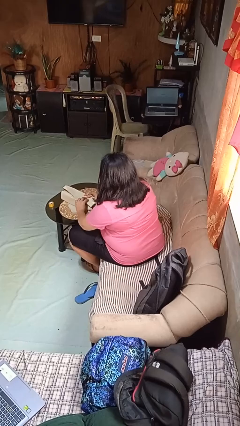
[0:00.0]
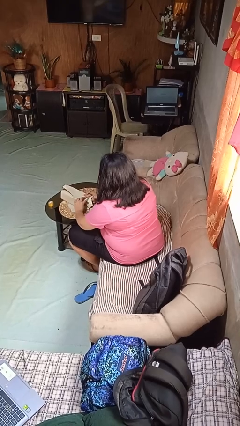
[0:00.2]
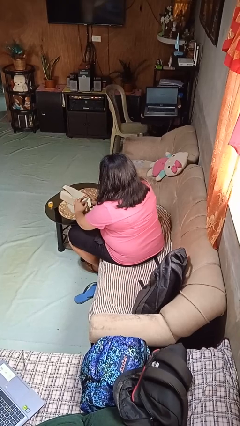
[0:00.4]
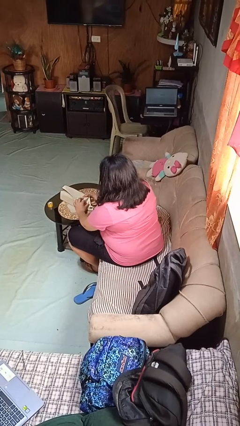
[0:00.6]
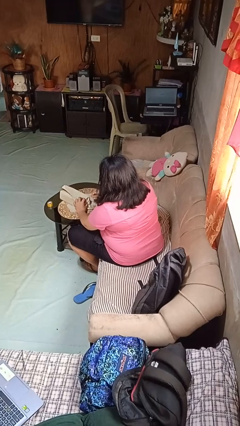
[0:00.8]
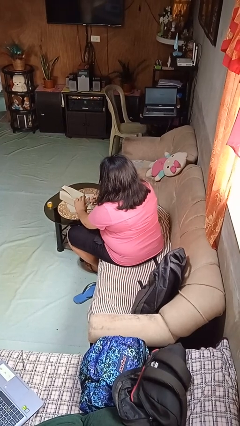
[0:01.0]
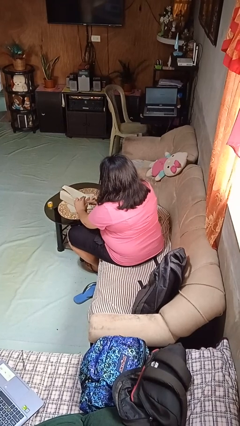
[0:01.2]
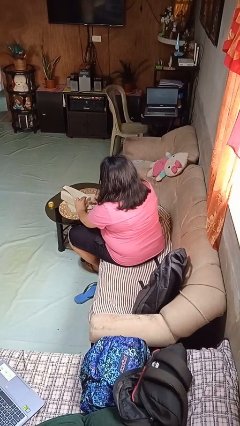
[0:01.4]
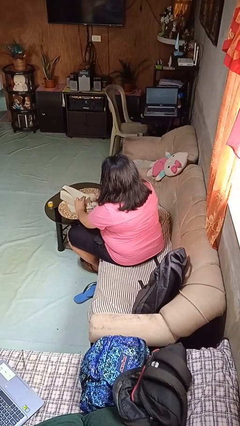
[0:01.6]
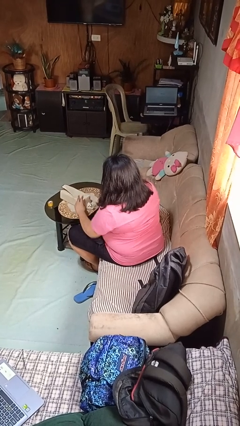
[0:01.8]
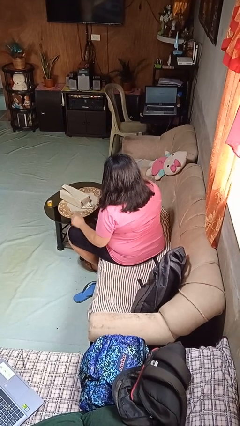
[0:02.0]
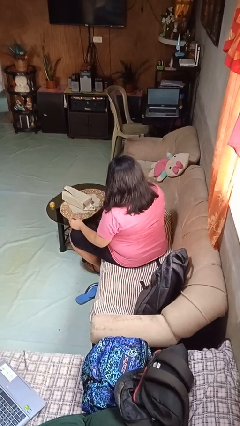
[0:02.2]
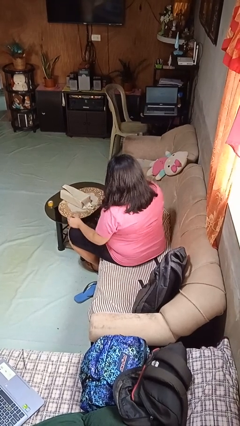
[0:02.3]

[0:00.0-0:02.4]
person wraps box

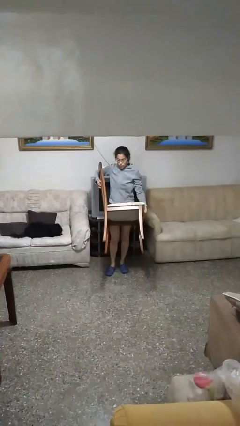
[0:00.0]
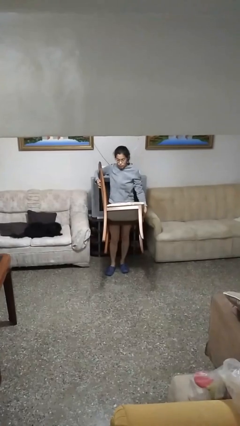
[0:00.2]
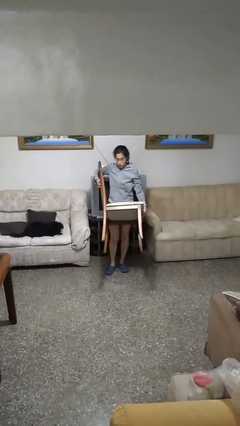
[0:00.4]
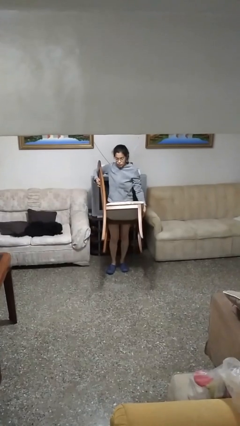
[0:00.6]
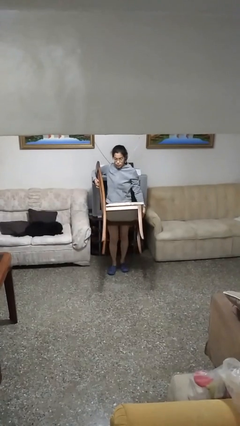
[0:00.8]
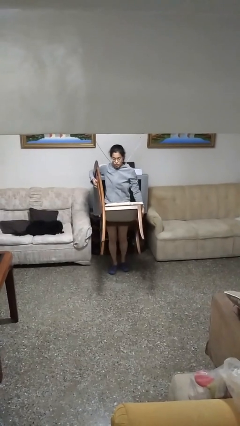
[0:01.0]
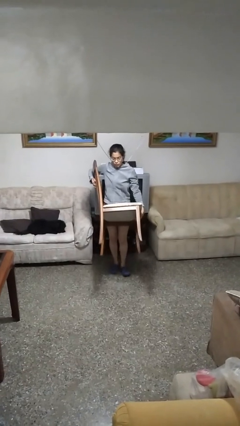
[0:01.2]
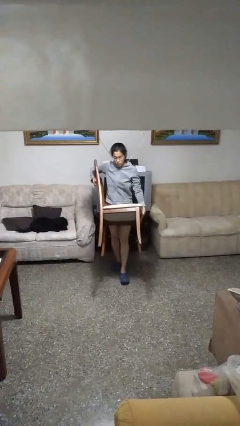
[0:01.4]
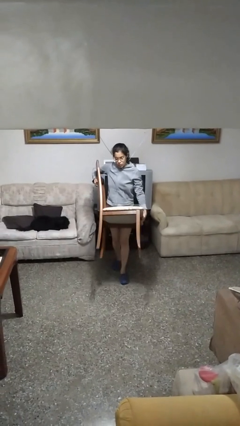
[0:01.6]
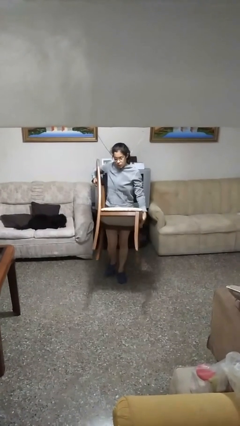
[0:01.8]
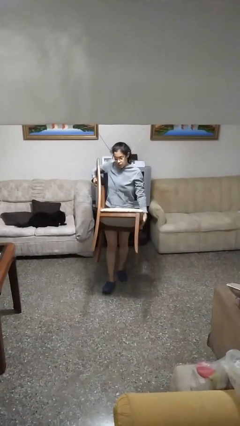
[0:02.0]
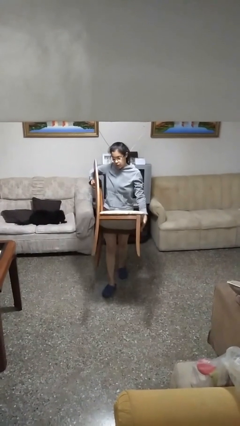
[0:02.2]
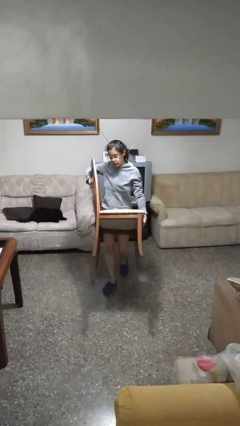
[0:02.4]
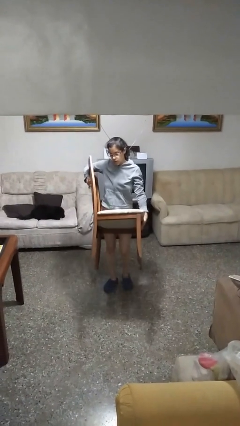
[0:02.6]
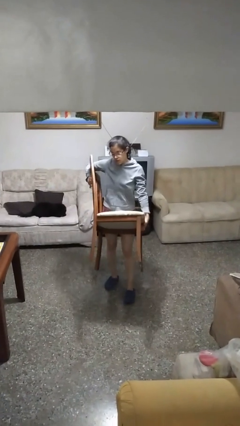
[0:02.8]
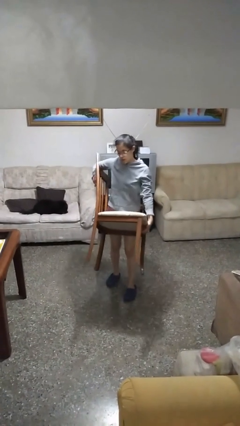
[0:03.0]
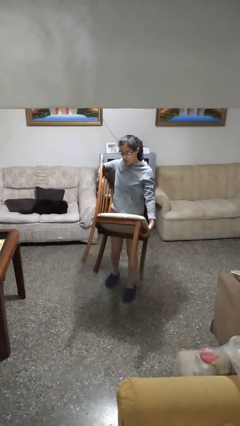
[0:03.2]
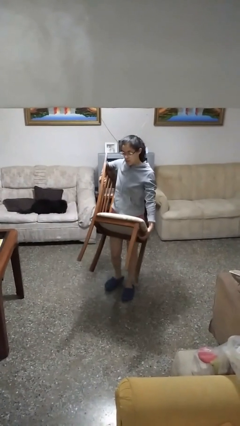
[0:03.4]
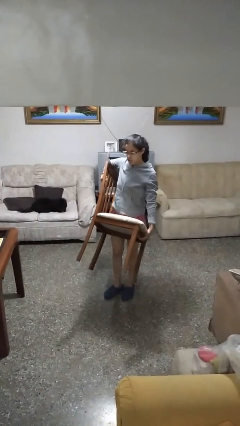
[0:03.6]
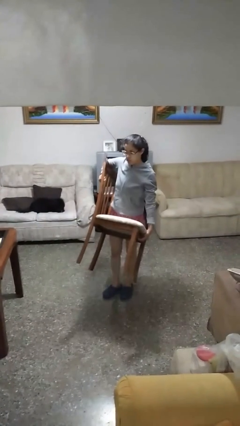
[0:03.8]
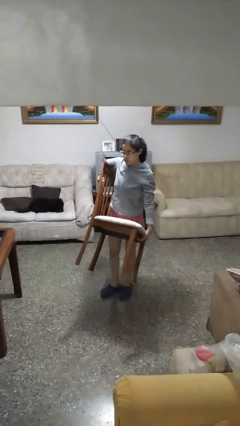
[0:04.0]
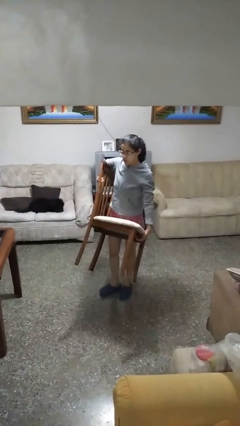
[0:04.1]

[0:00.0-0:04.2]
person carries furniture

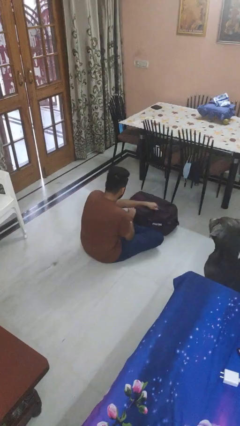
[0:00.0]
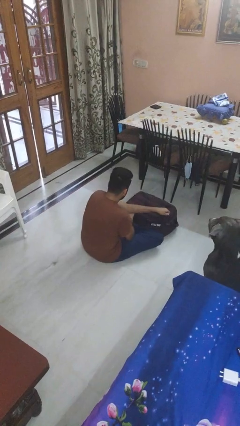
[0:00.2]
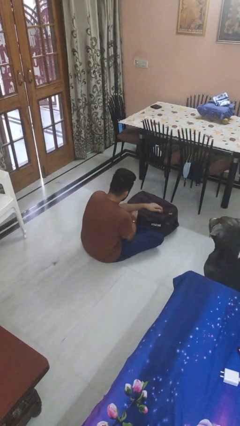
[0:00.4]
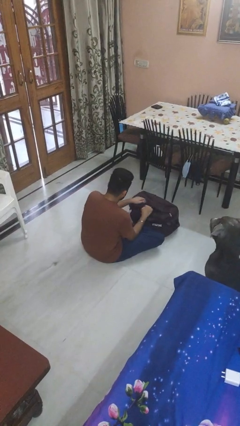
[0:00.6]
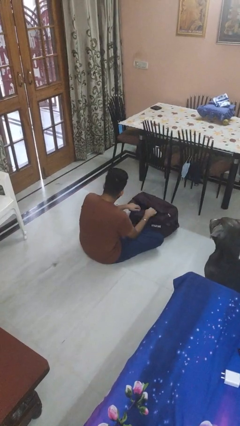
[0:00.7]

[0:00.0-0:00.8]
person opens suitcase

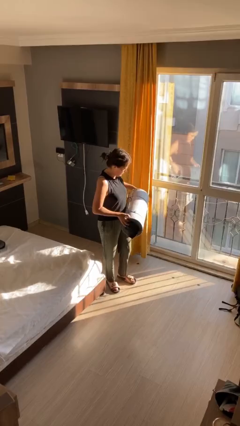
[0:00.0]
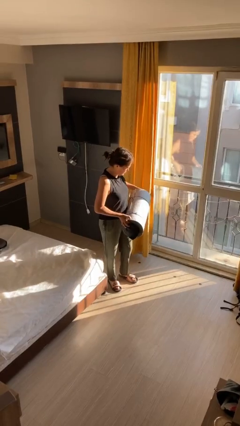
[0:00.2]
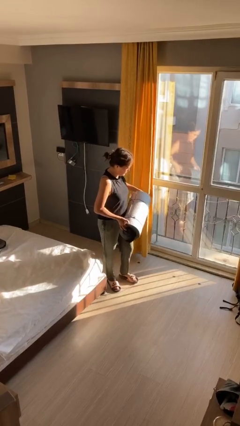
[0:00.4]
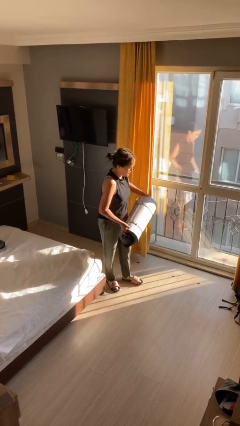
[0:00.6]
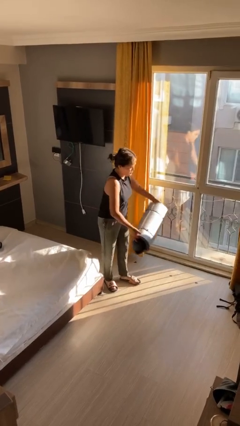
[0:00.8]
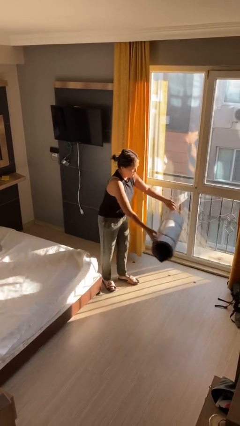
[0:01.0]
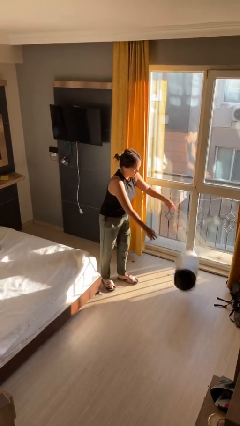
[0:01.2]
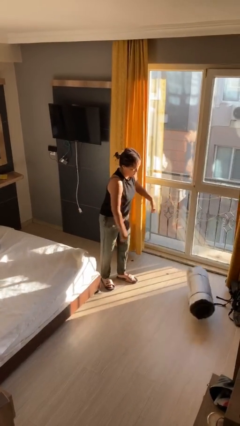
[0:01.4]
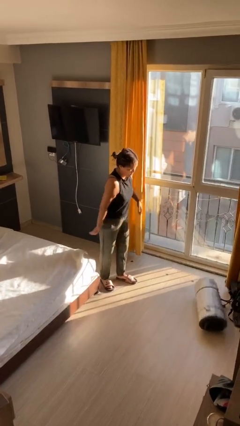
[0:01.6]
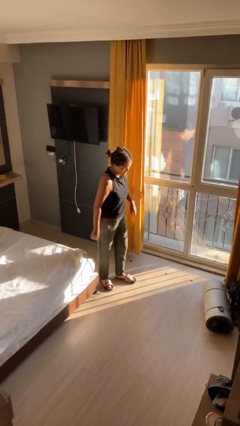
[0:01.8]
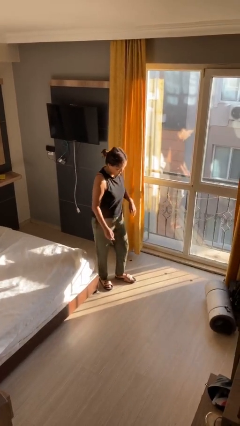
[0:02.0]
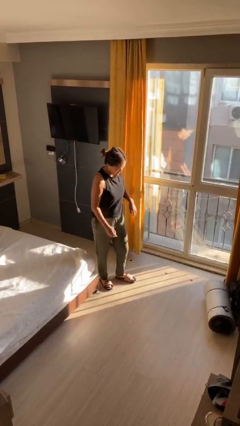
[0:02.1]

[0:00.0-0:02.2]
person throws object to ground

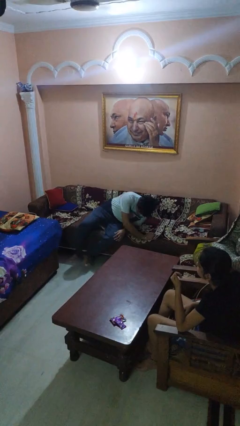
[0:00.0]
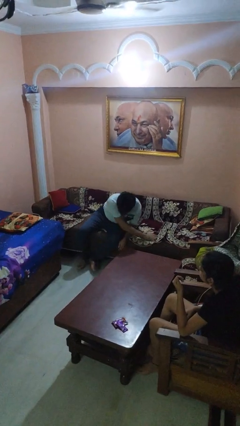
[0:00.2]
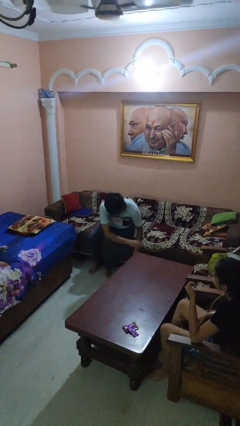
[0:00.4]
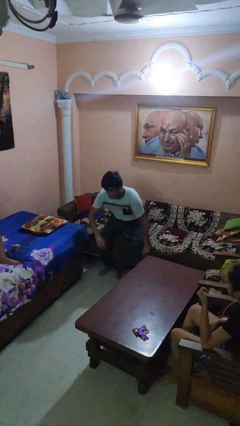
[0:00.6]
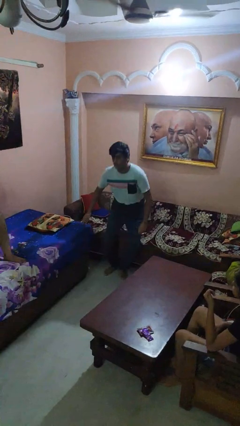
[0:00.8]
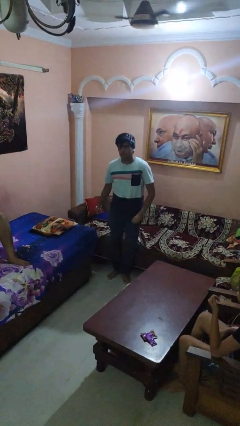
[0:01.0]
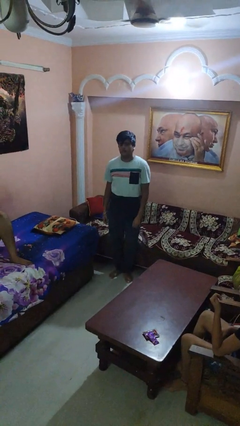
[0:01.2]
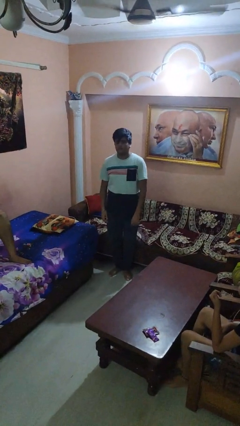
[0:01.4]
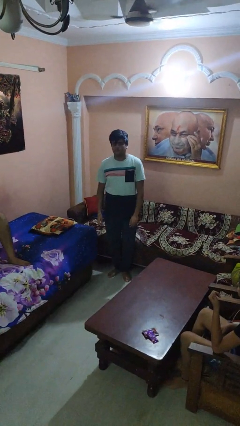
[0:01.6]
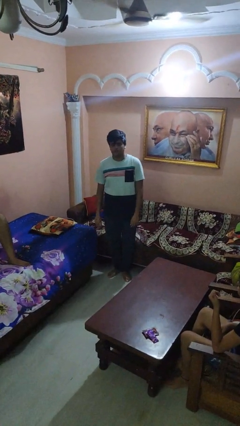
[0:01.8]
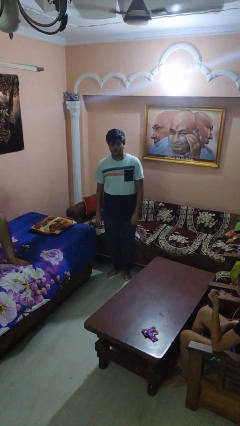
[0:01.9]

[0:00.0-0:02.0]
person stands up

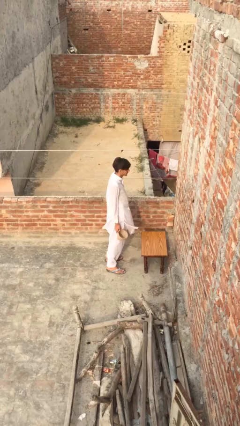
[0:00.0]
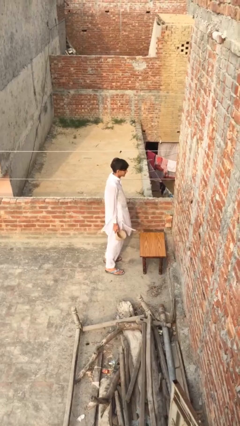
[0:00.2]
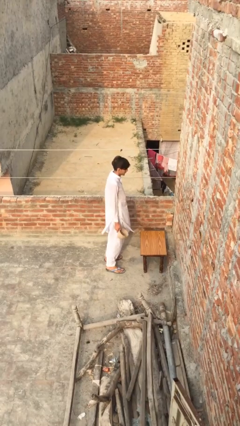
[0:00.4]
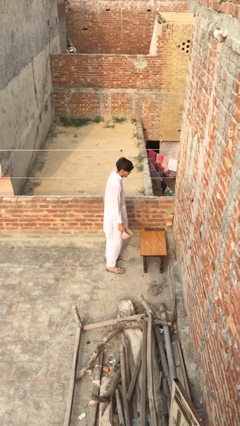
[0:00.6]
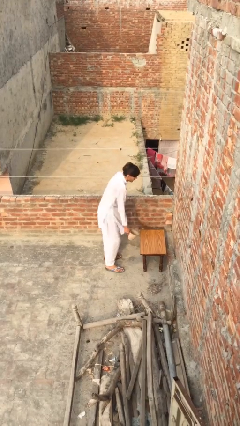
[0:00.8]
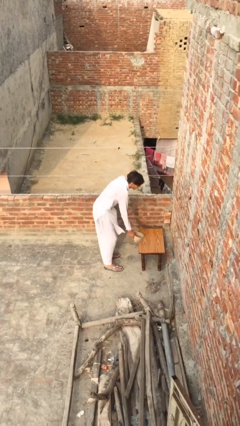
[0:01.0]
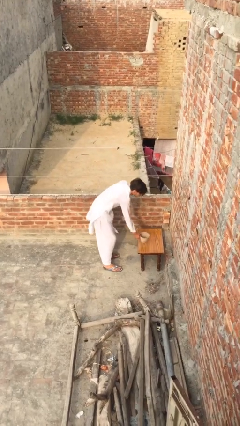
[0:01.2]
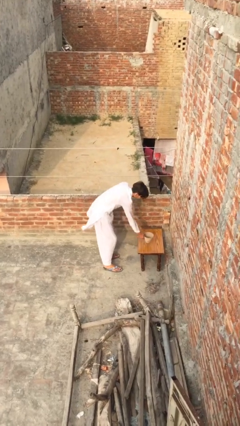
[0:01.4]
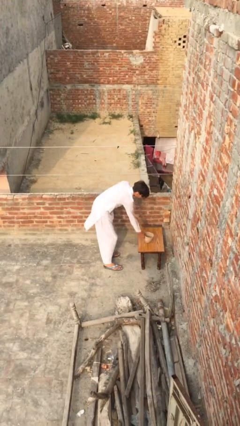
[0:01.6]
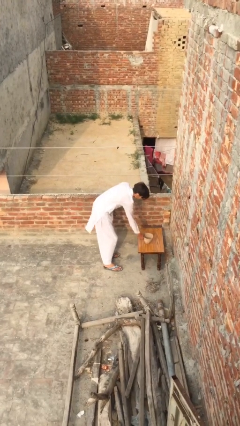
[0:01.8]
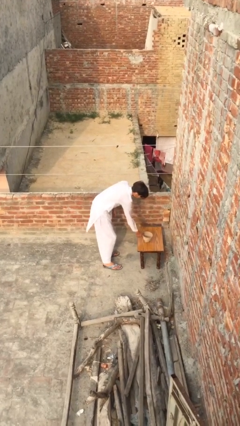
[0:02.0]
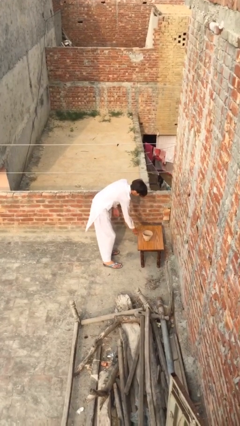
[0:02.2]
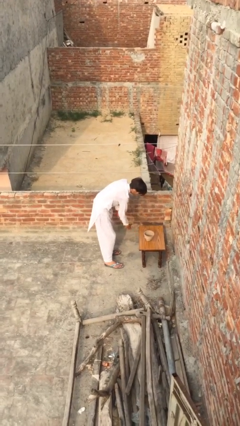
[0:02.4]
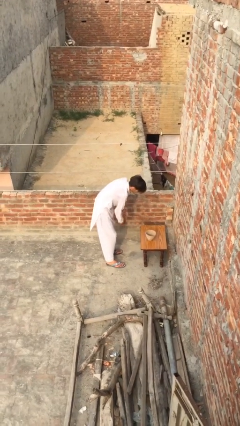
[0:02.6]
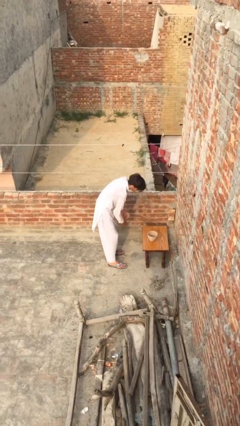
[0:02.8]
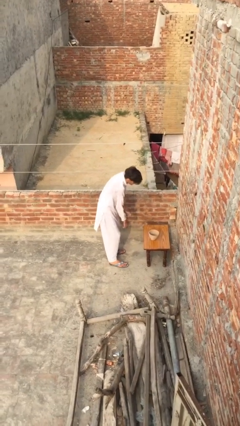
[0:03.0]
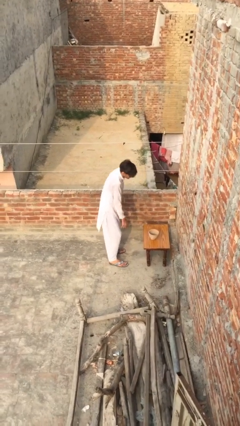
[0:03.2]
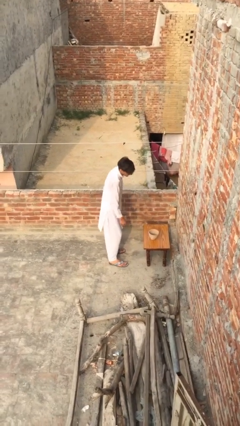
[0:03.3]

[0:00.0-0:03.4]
person puts down object on table

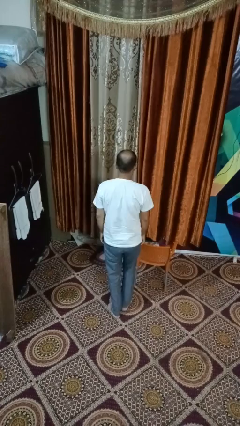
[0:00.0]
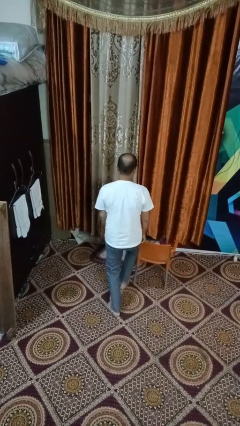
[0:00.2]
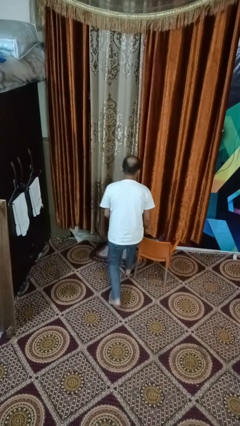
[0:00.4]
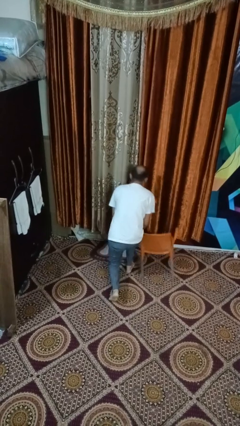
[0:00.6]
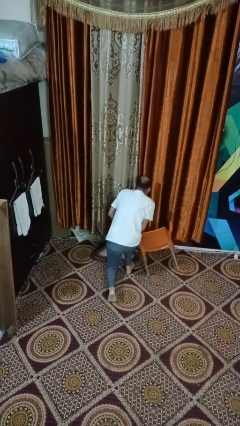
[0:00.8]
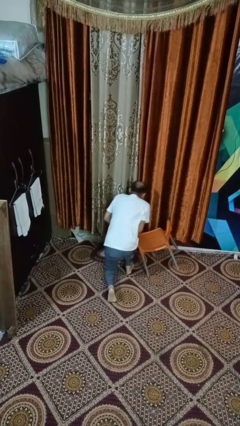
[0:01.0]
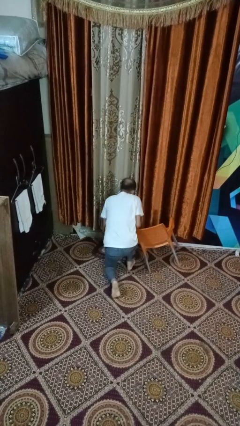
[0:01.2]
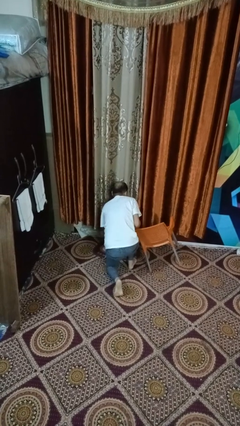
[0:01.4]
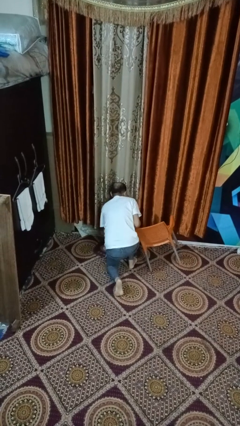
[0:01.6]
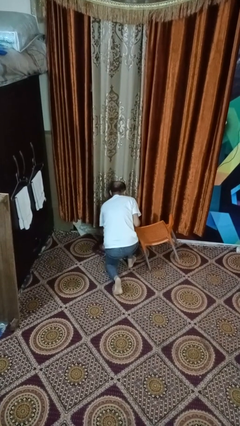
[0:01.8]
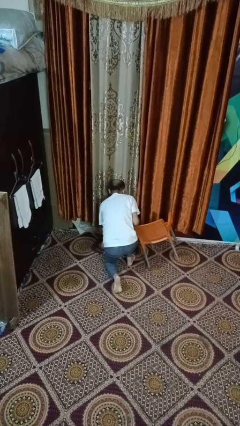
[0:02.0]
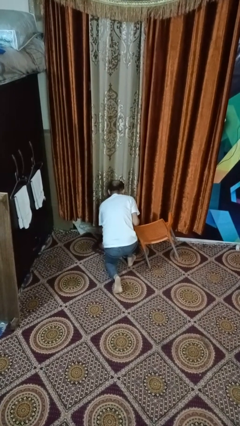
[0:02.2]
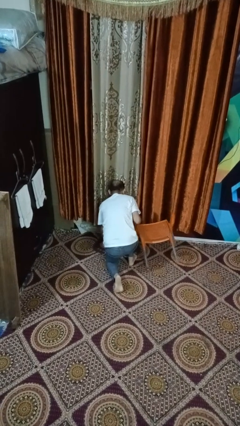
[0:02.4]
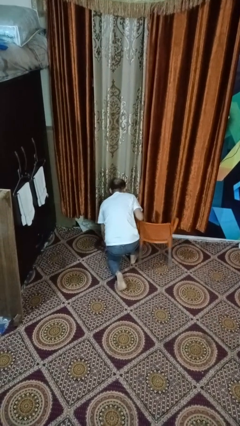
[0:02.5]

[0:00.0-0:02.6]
person trips on object on floor
